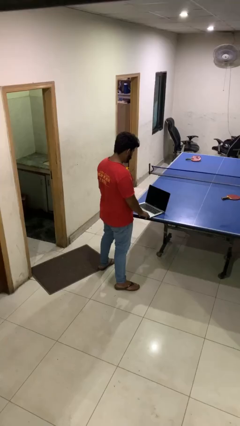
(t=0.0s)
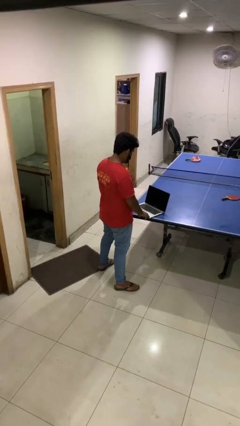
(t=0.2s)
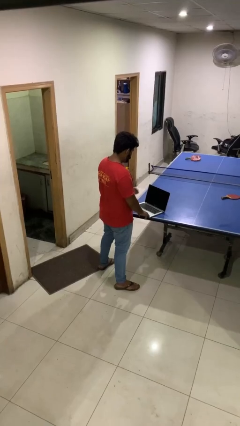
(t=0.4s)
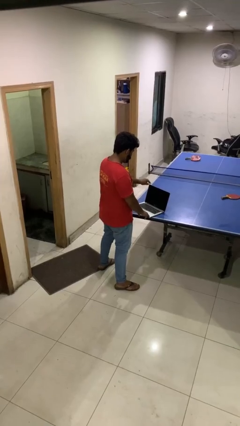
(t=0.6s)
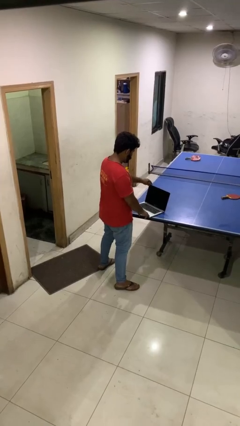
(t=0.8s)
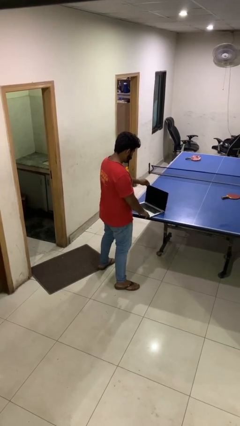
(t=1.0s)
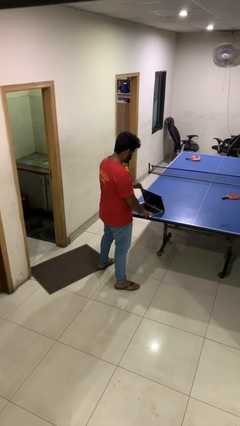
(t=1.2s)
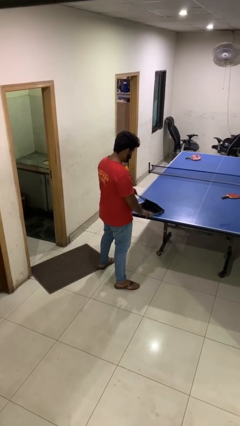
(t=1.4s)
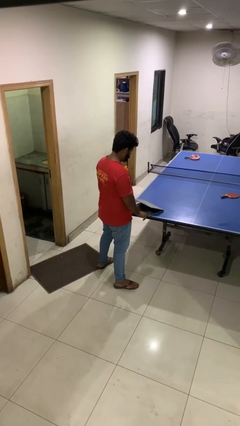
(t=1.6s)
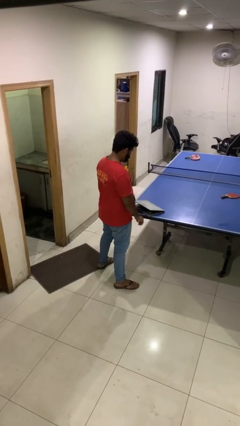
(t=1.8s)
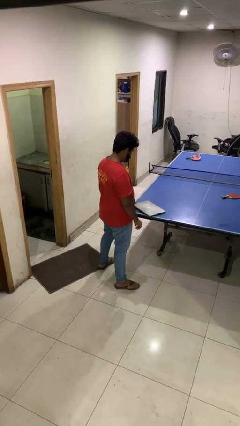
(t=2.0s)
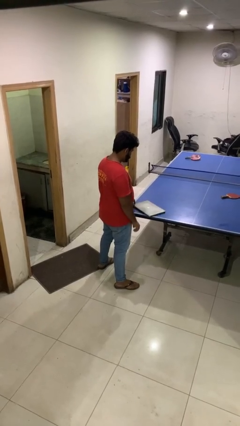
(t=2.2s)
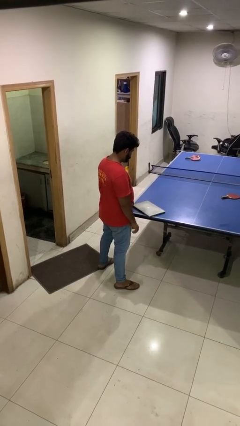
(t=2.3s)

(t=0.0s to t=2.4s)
person closes laptop

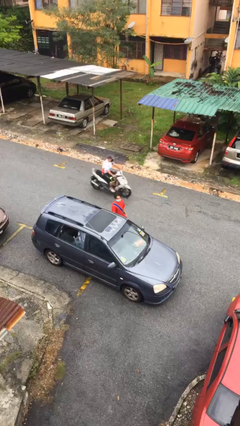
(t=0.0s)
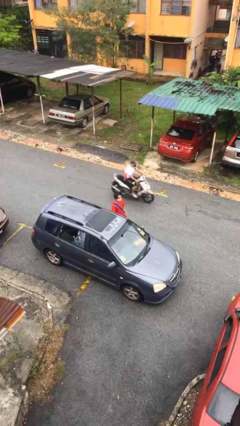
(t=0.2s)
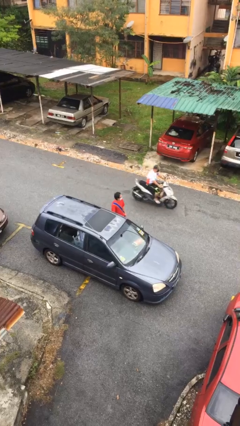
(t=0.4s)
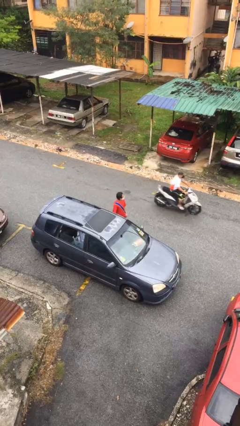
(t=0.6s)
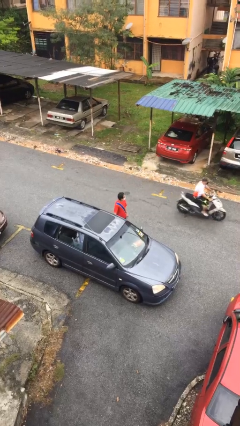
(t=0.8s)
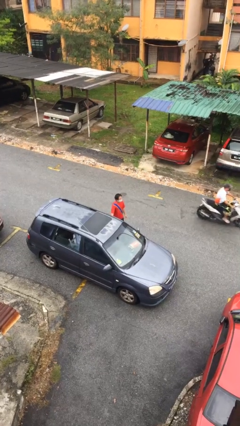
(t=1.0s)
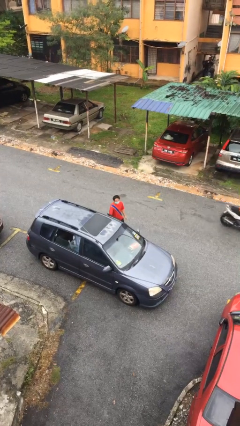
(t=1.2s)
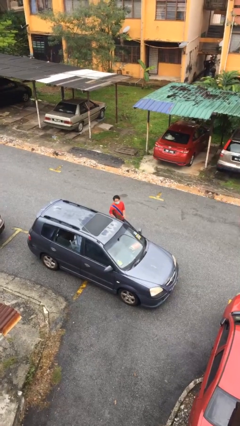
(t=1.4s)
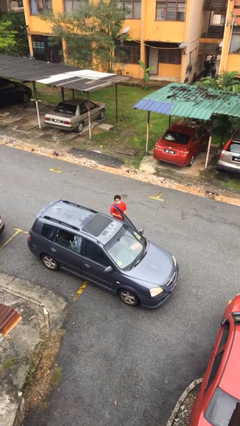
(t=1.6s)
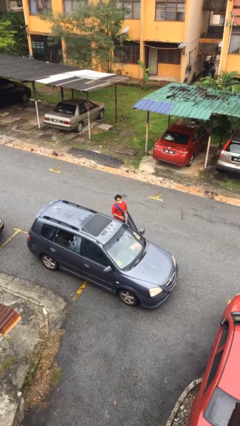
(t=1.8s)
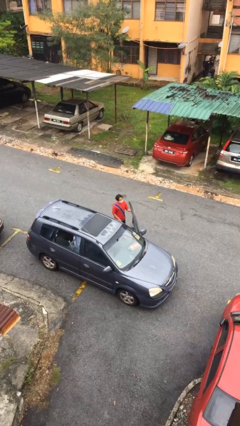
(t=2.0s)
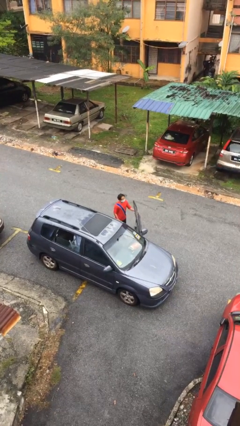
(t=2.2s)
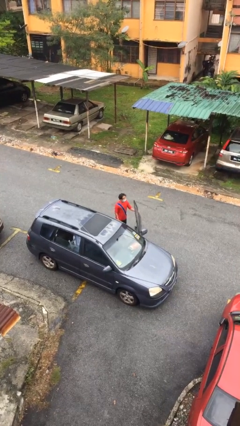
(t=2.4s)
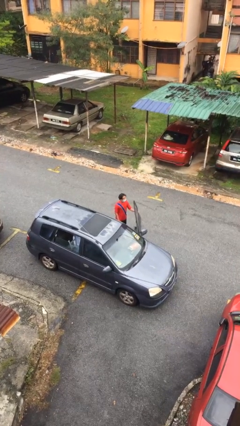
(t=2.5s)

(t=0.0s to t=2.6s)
person opens car door

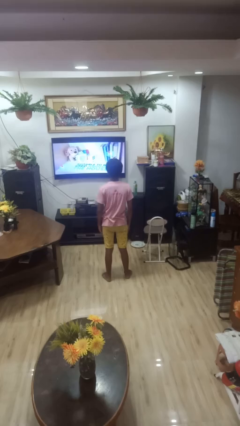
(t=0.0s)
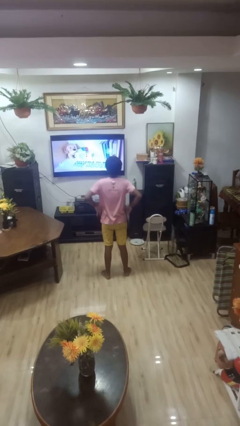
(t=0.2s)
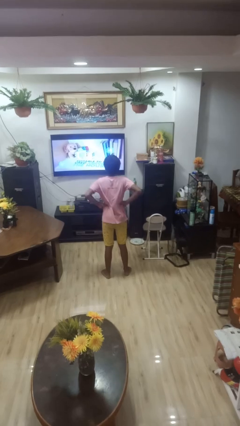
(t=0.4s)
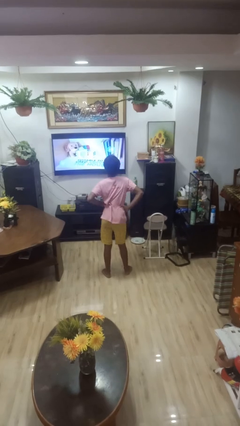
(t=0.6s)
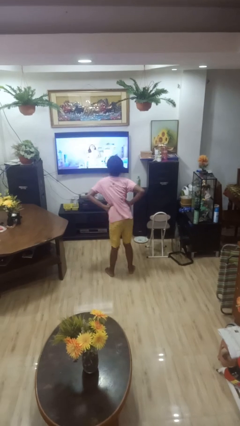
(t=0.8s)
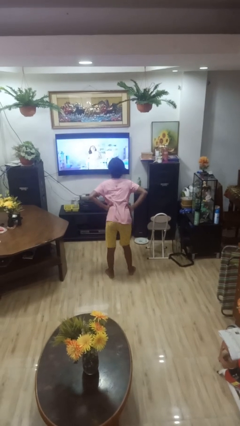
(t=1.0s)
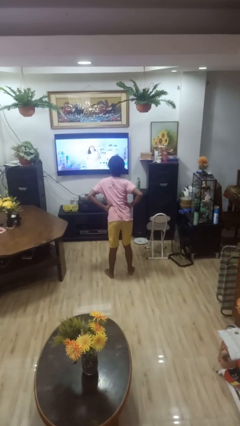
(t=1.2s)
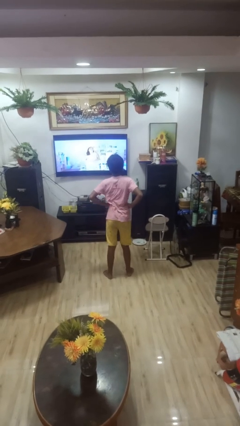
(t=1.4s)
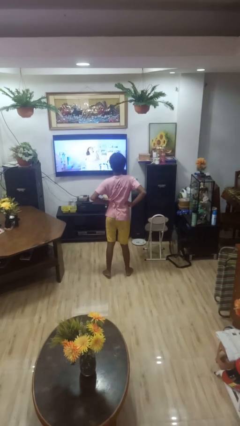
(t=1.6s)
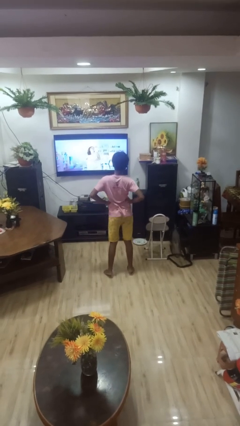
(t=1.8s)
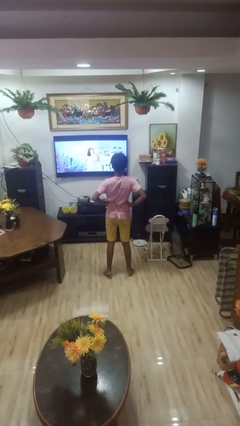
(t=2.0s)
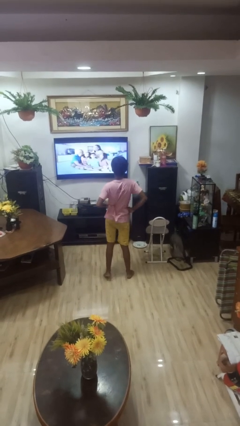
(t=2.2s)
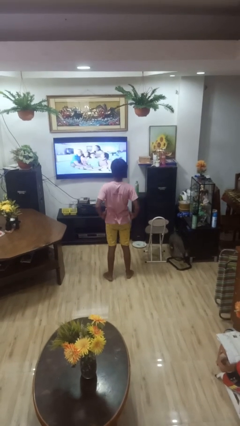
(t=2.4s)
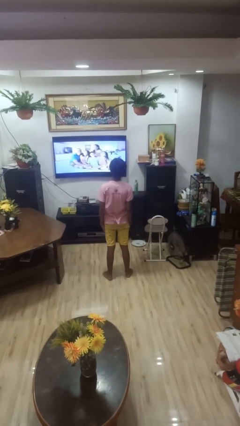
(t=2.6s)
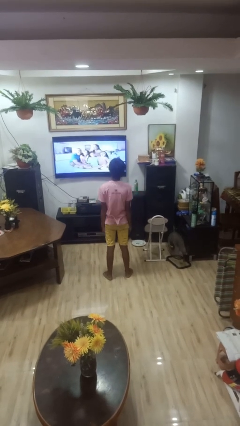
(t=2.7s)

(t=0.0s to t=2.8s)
person wiggles hips

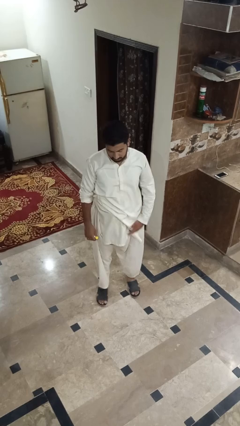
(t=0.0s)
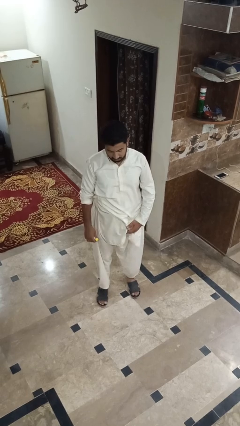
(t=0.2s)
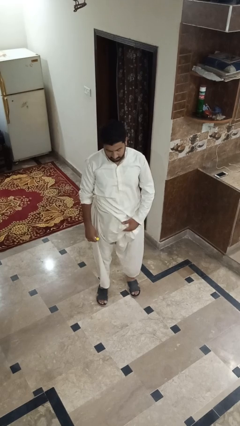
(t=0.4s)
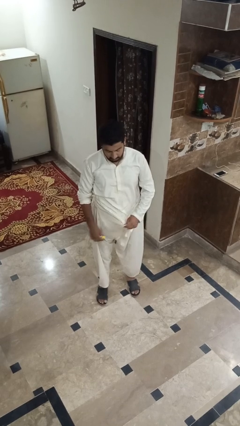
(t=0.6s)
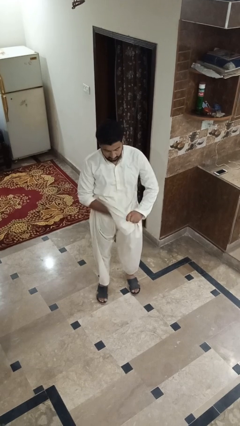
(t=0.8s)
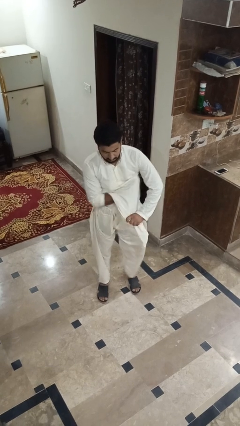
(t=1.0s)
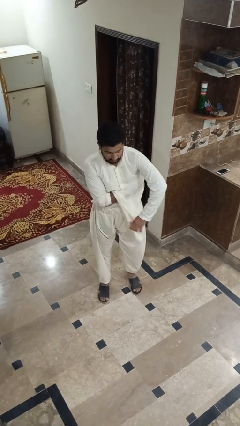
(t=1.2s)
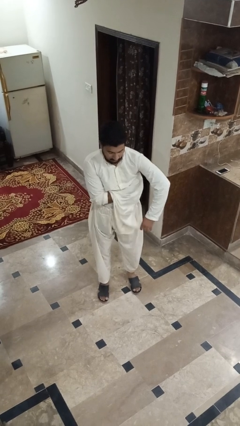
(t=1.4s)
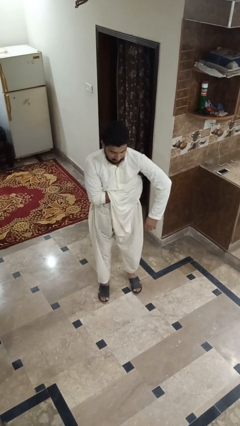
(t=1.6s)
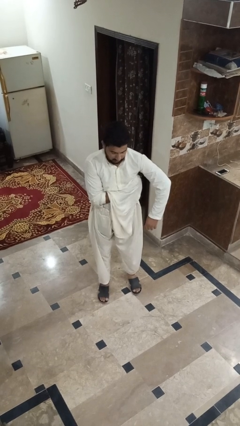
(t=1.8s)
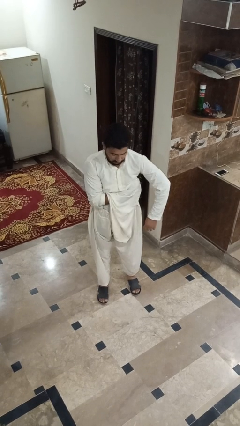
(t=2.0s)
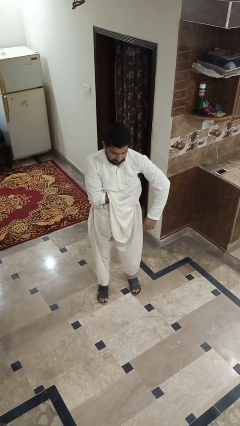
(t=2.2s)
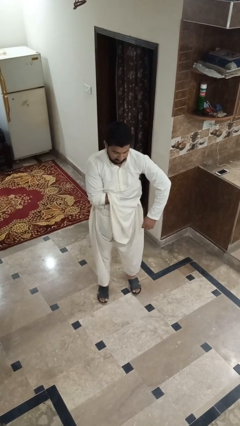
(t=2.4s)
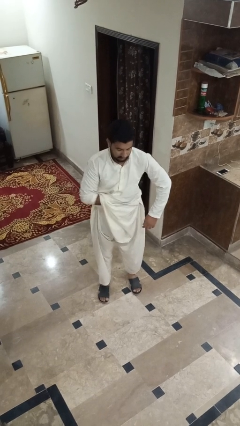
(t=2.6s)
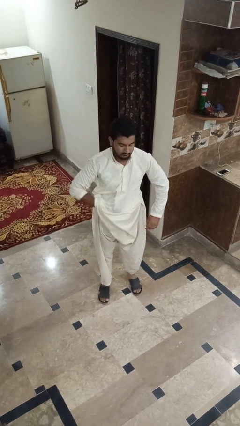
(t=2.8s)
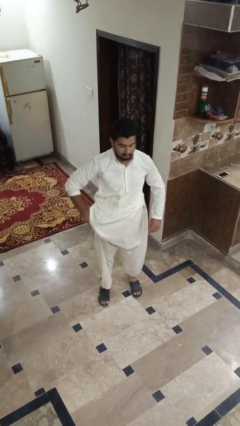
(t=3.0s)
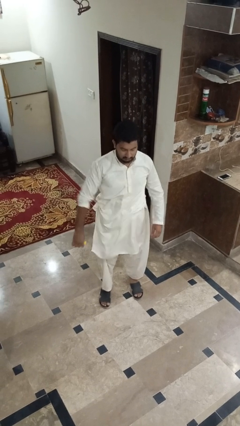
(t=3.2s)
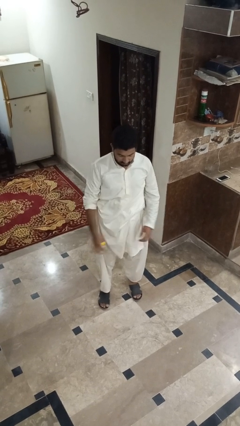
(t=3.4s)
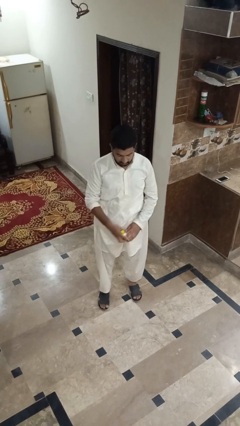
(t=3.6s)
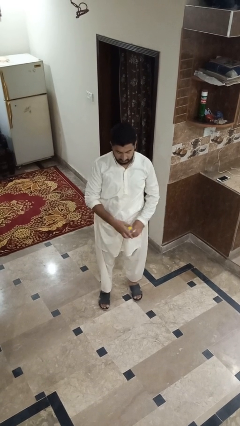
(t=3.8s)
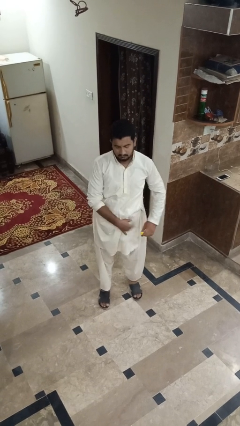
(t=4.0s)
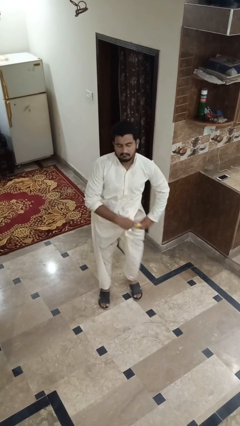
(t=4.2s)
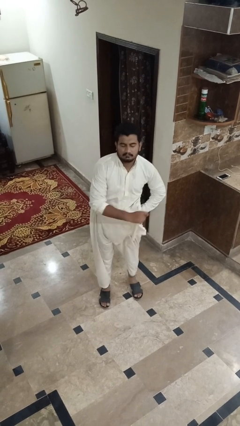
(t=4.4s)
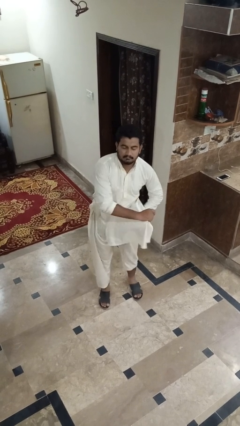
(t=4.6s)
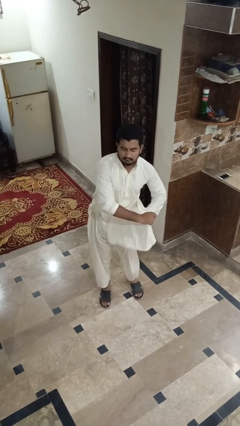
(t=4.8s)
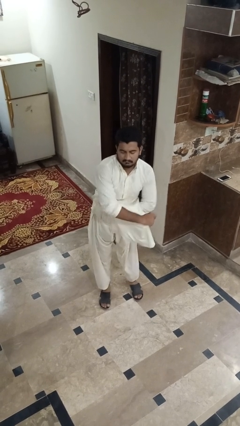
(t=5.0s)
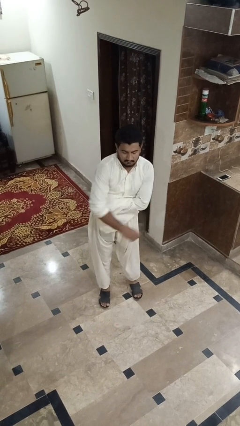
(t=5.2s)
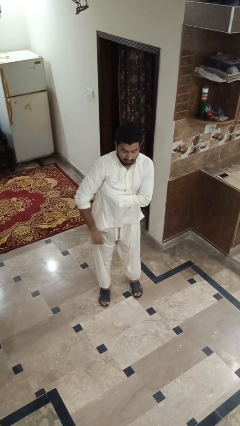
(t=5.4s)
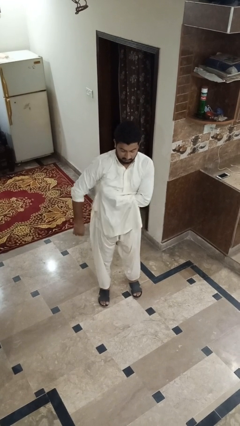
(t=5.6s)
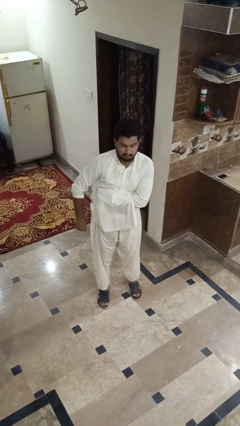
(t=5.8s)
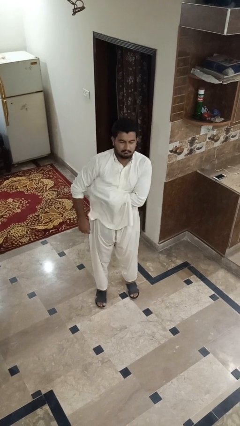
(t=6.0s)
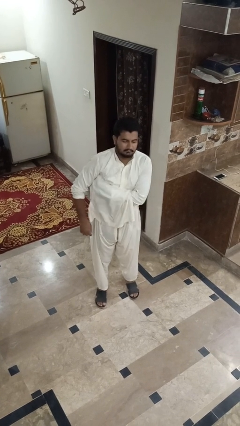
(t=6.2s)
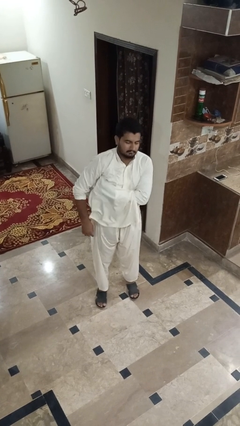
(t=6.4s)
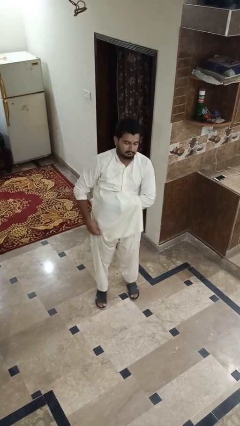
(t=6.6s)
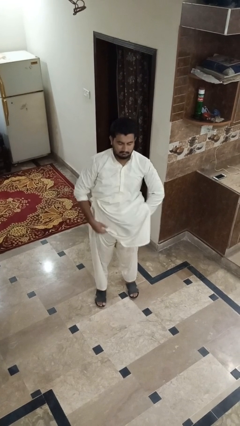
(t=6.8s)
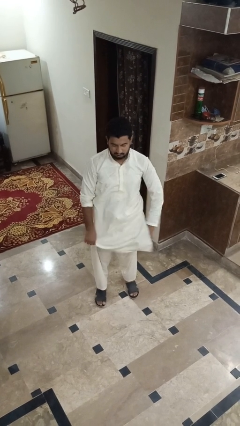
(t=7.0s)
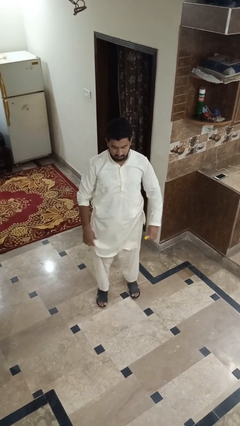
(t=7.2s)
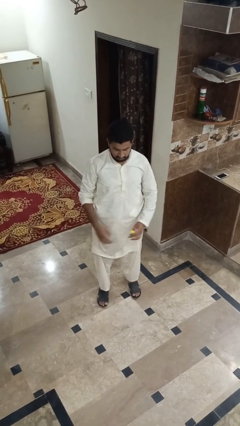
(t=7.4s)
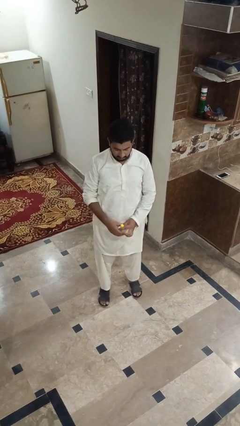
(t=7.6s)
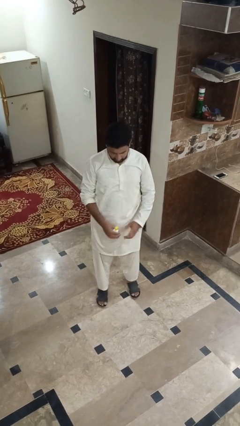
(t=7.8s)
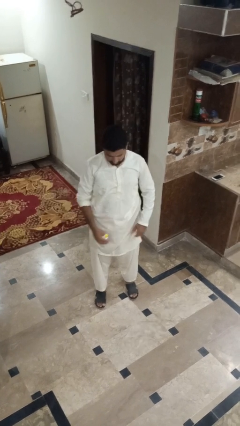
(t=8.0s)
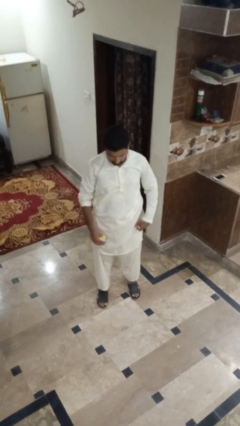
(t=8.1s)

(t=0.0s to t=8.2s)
person applies deodorant

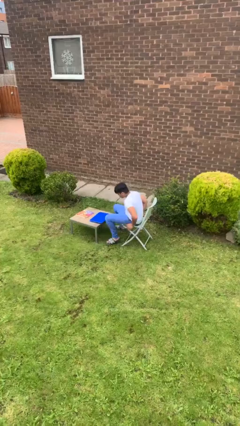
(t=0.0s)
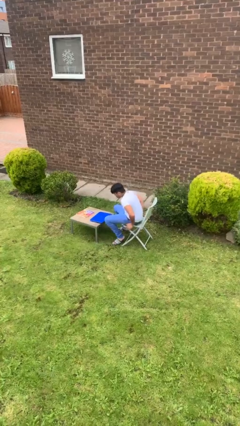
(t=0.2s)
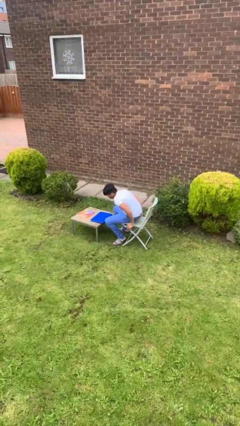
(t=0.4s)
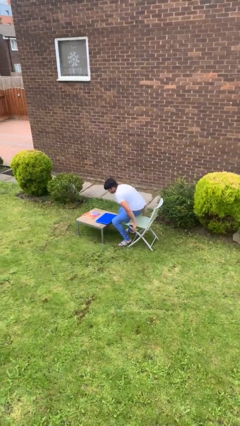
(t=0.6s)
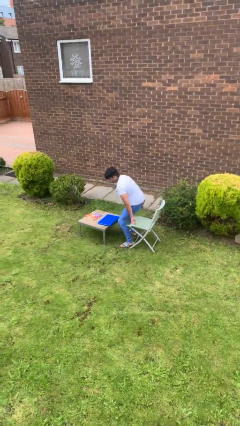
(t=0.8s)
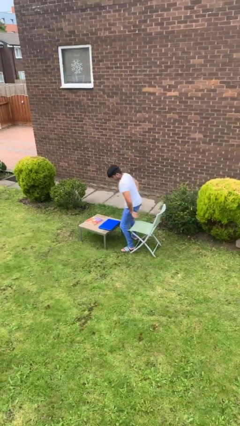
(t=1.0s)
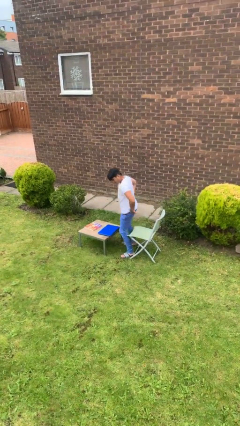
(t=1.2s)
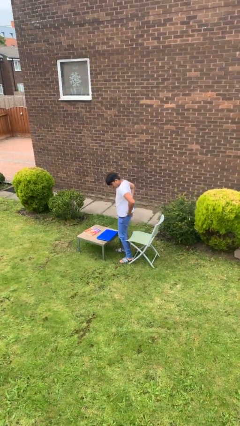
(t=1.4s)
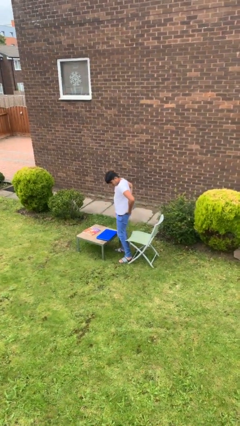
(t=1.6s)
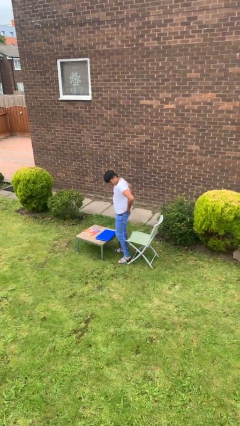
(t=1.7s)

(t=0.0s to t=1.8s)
person stands up
